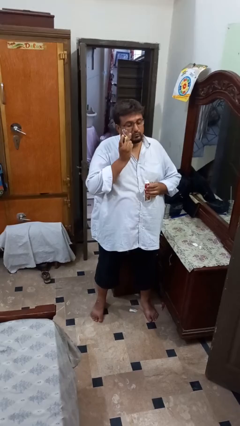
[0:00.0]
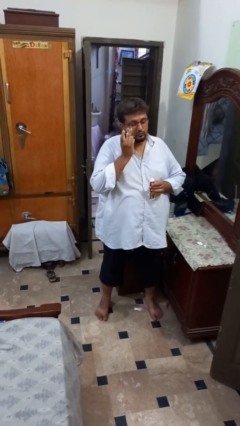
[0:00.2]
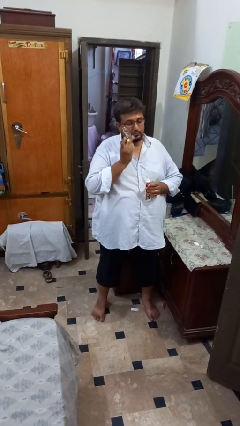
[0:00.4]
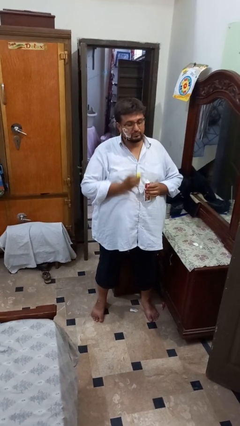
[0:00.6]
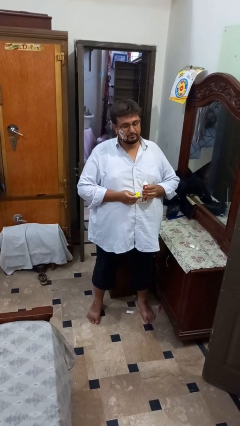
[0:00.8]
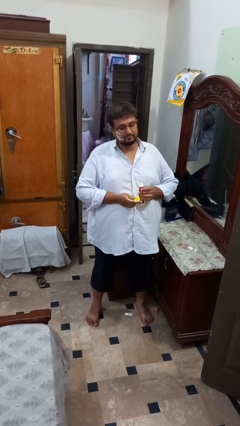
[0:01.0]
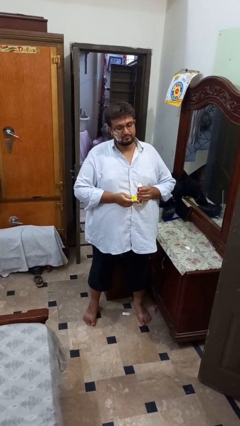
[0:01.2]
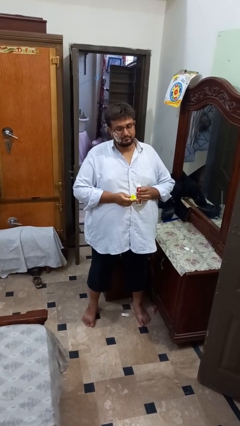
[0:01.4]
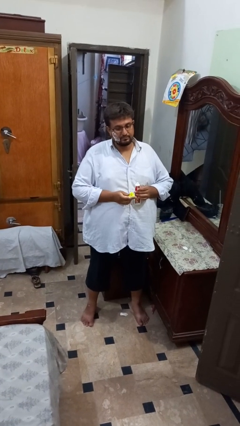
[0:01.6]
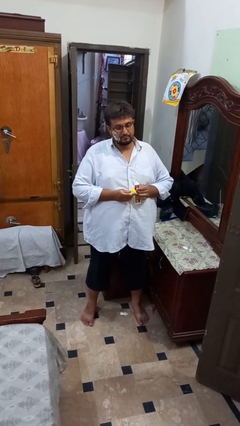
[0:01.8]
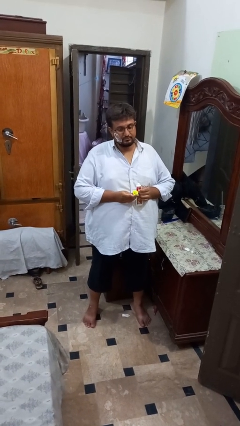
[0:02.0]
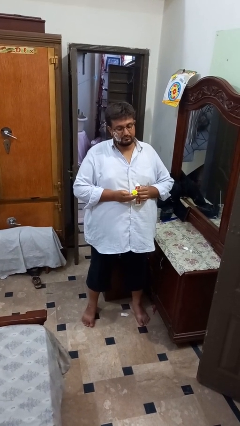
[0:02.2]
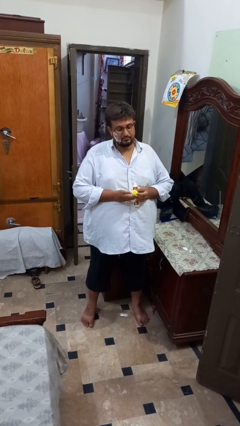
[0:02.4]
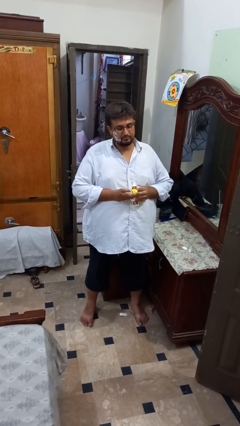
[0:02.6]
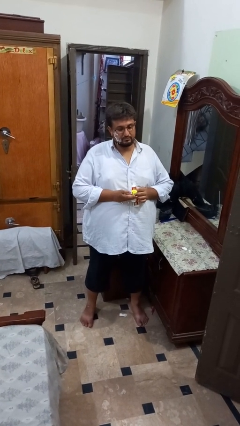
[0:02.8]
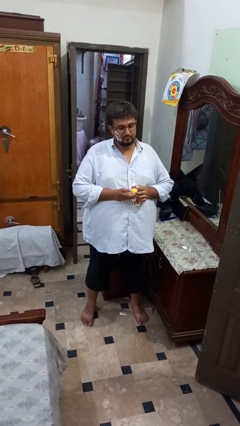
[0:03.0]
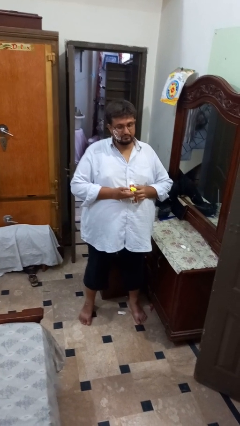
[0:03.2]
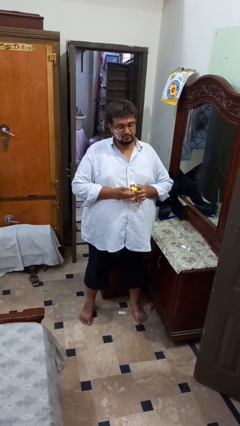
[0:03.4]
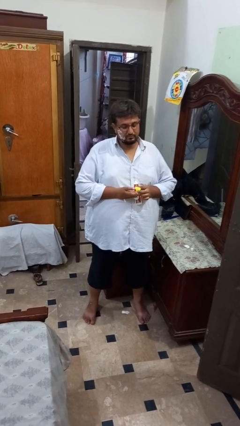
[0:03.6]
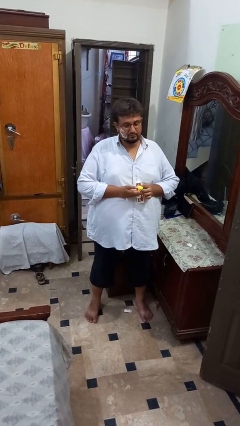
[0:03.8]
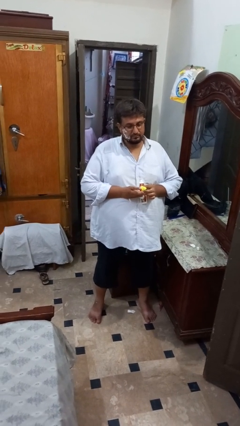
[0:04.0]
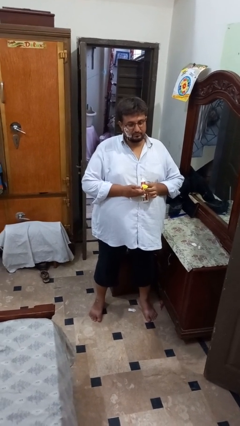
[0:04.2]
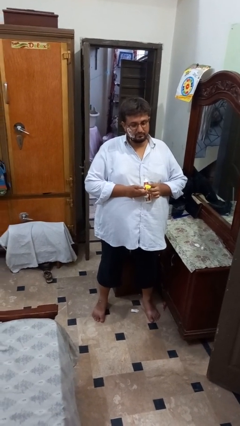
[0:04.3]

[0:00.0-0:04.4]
person applies shaving cream

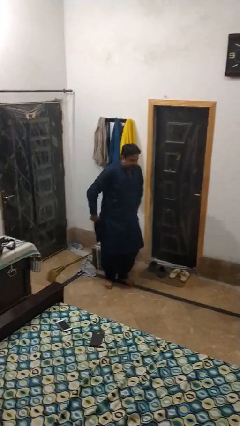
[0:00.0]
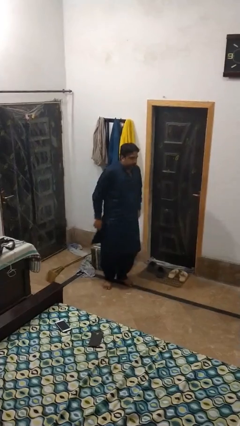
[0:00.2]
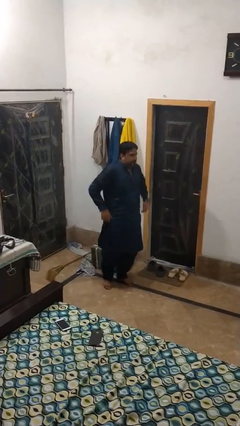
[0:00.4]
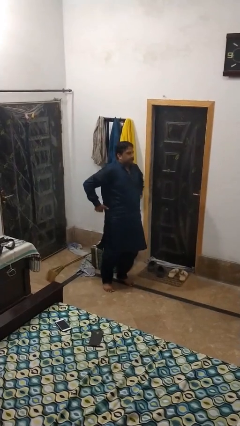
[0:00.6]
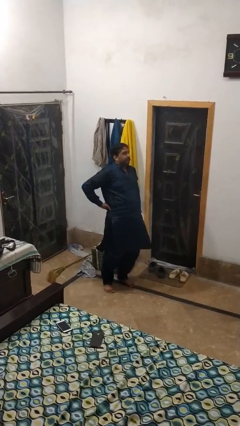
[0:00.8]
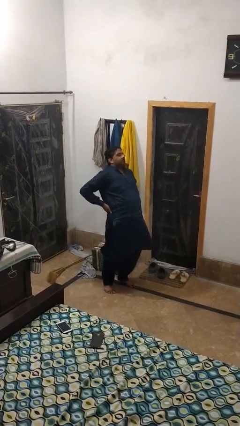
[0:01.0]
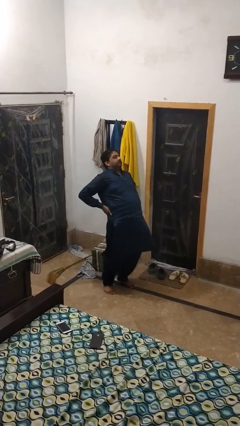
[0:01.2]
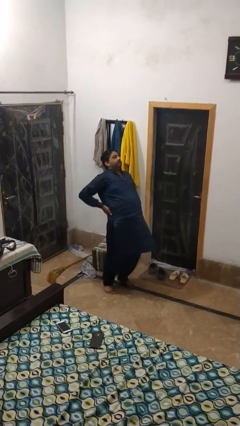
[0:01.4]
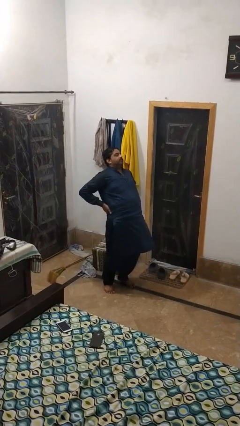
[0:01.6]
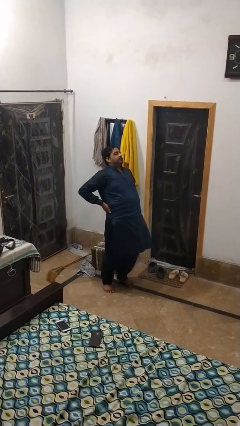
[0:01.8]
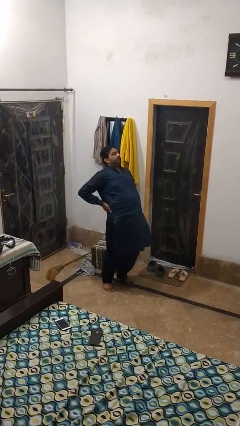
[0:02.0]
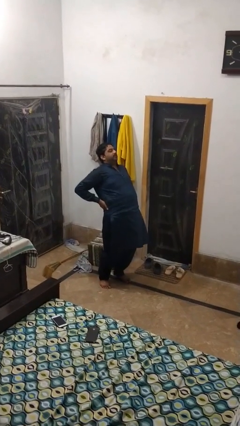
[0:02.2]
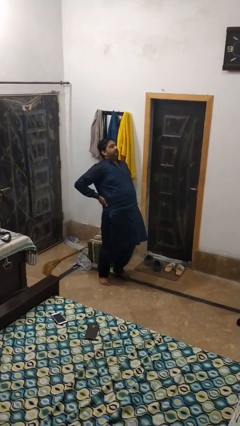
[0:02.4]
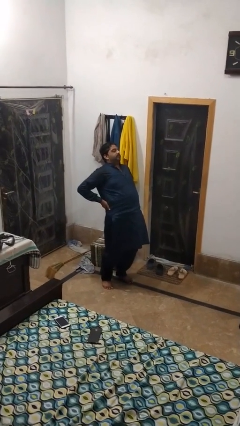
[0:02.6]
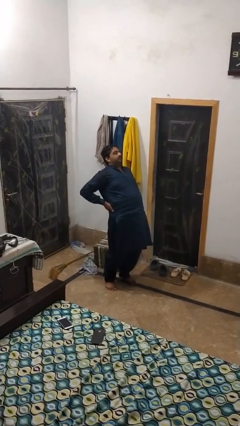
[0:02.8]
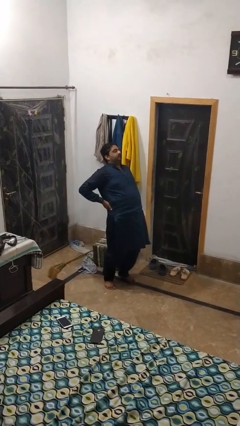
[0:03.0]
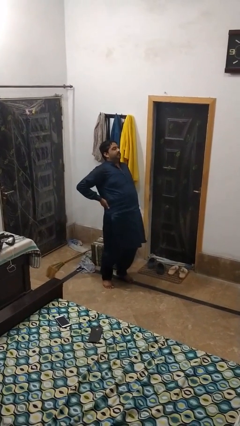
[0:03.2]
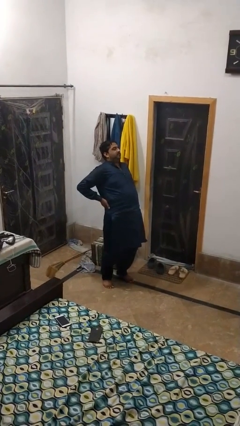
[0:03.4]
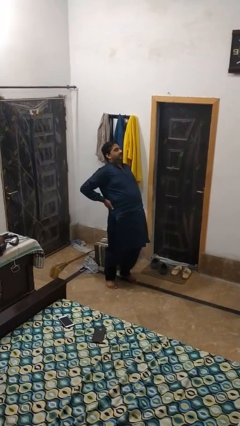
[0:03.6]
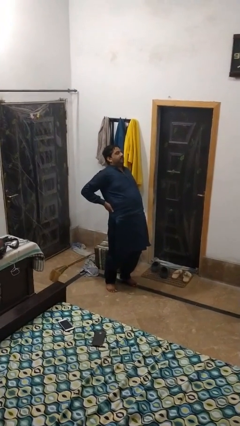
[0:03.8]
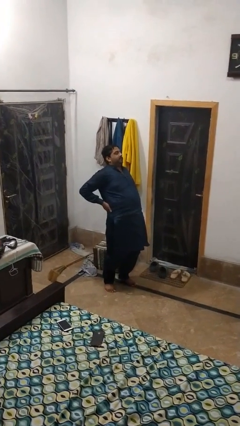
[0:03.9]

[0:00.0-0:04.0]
person stretches back

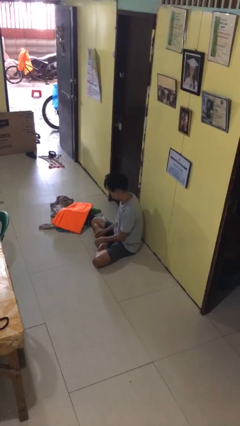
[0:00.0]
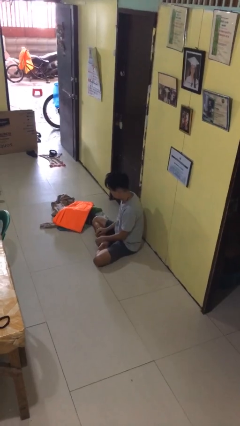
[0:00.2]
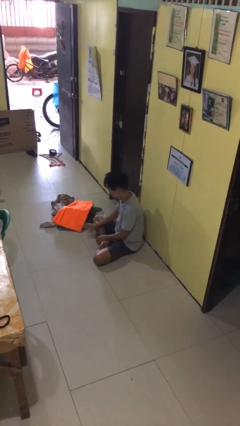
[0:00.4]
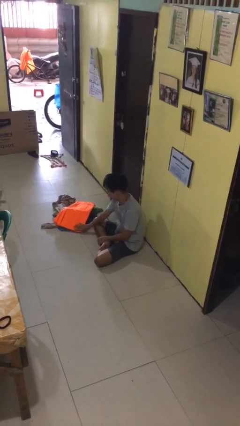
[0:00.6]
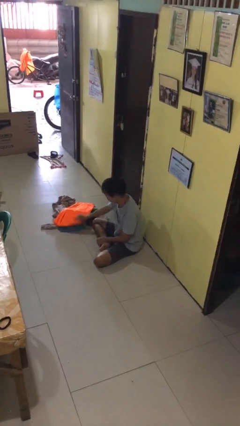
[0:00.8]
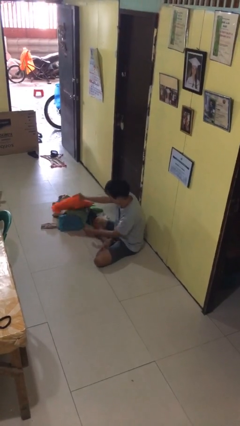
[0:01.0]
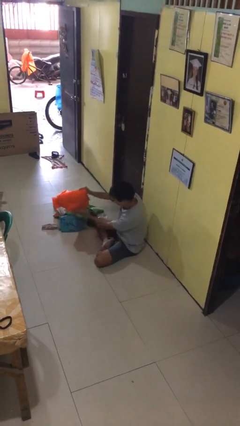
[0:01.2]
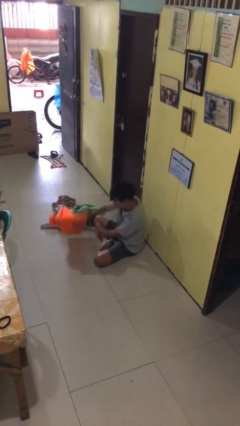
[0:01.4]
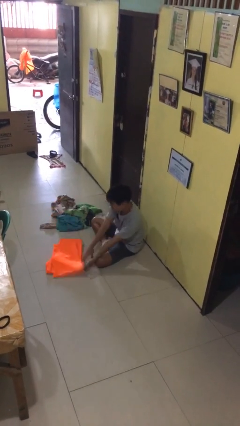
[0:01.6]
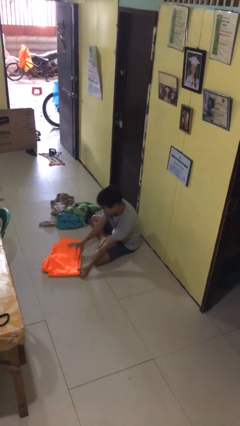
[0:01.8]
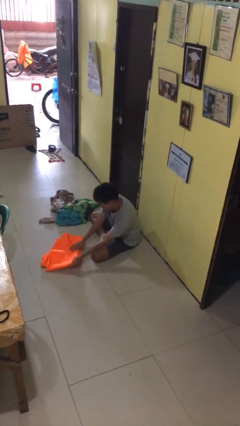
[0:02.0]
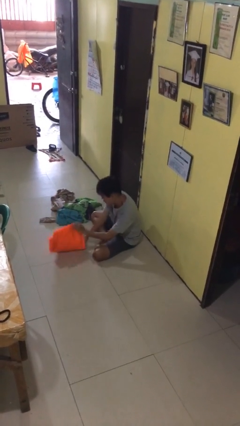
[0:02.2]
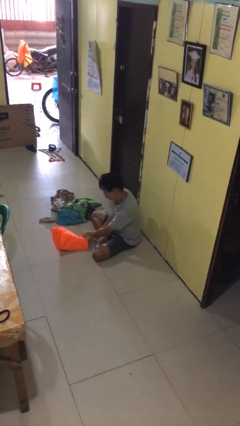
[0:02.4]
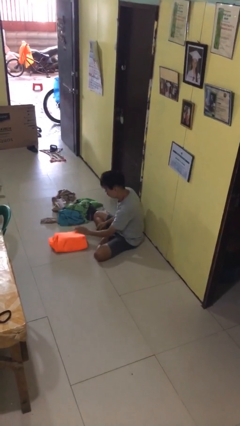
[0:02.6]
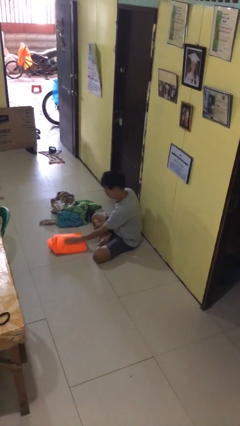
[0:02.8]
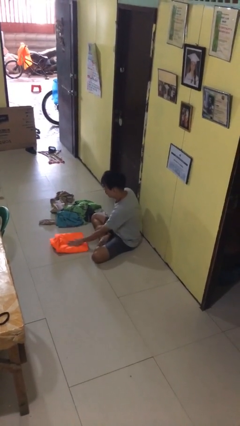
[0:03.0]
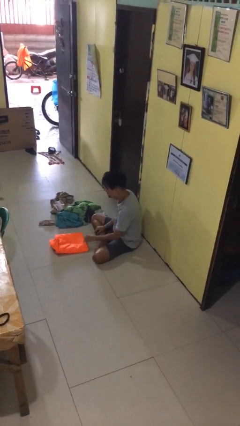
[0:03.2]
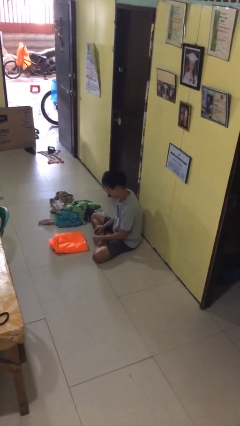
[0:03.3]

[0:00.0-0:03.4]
person folds pants

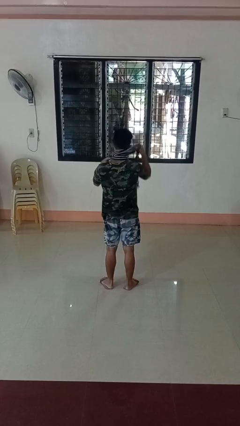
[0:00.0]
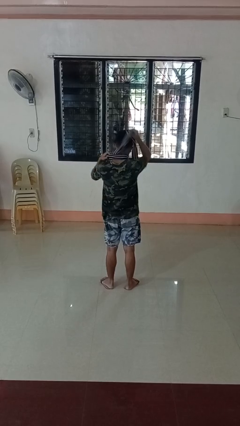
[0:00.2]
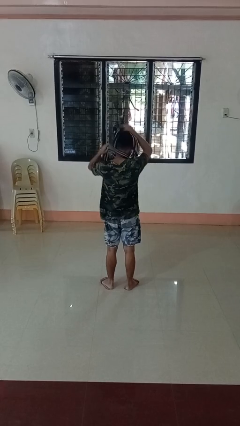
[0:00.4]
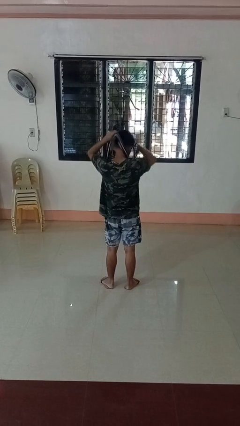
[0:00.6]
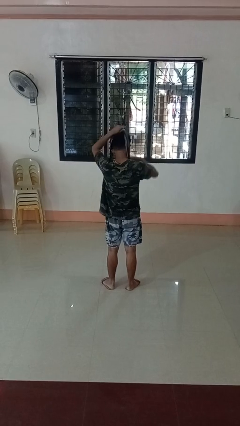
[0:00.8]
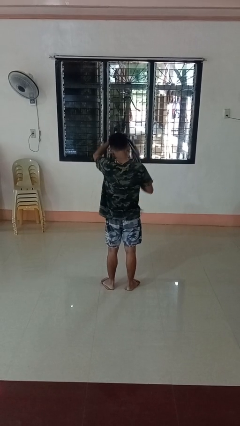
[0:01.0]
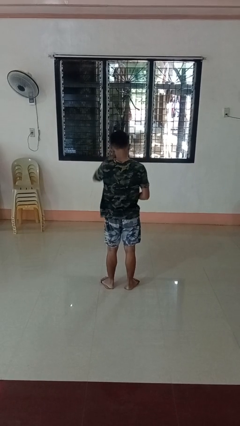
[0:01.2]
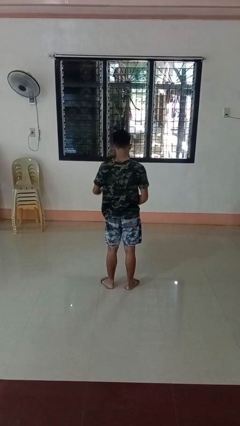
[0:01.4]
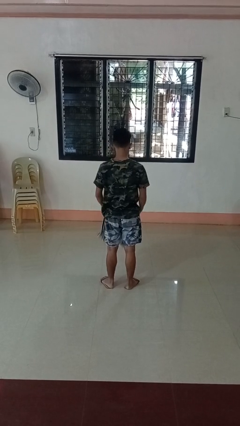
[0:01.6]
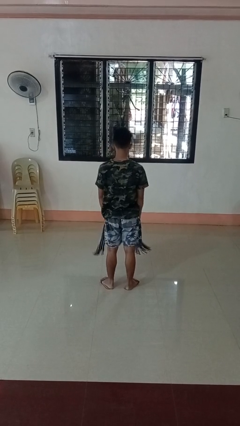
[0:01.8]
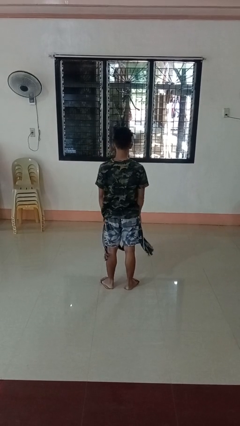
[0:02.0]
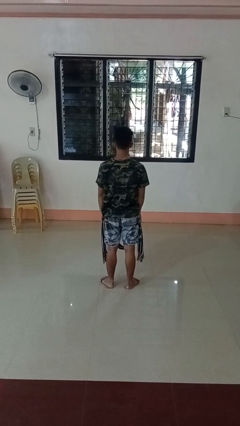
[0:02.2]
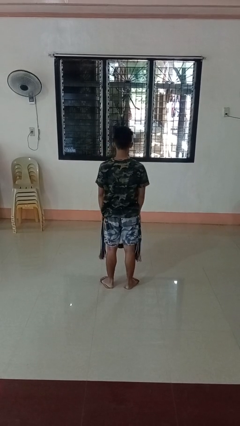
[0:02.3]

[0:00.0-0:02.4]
person takes off scarf

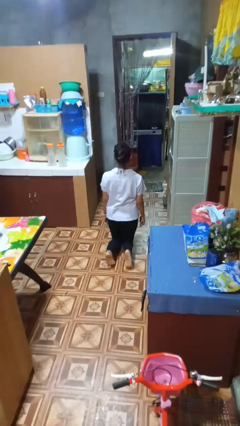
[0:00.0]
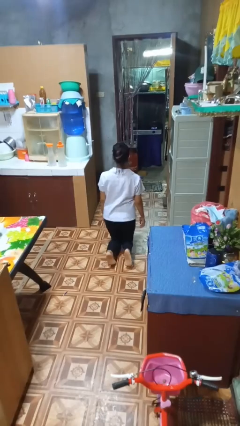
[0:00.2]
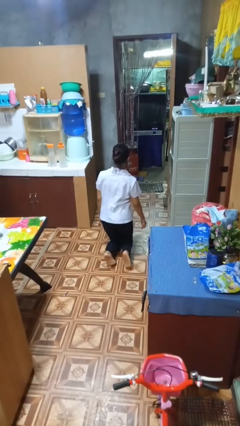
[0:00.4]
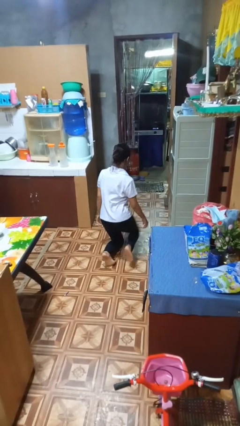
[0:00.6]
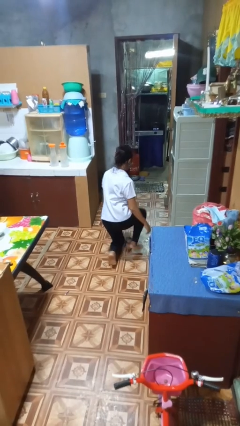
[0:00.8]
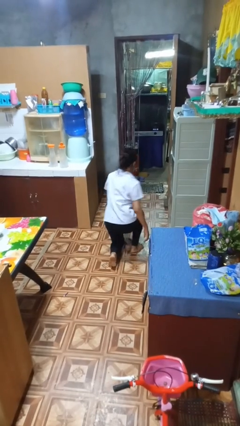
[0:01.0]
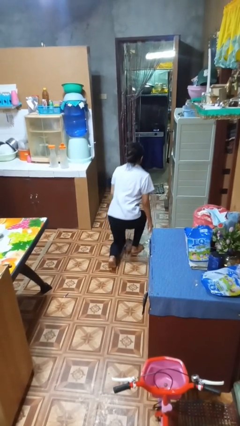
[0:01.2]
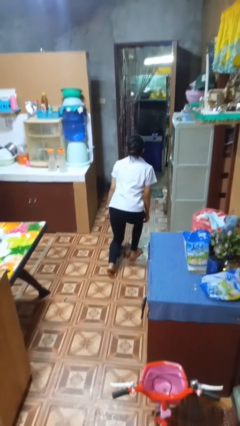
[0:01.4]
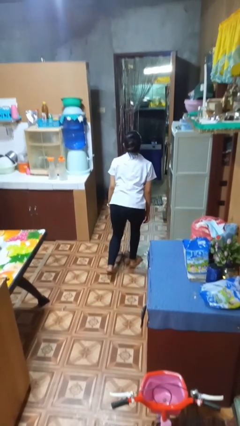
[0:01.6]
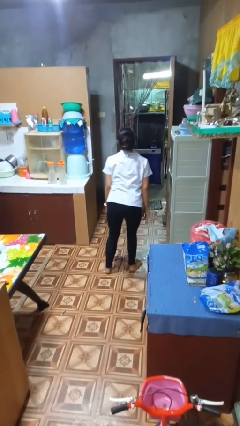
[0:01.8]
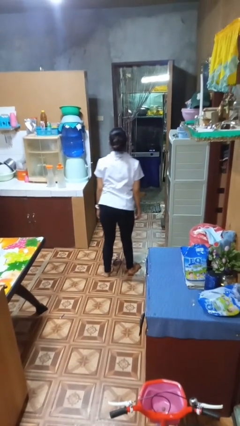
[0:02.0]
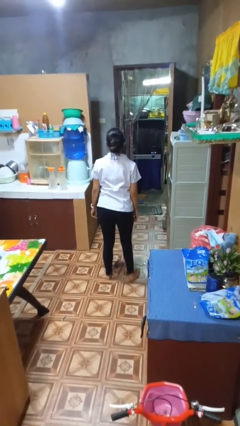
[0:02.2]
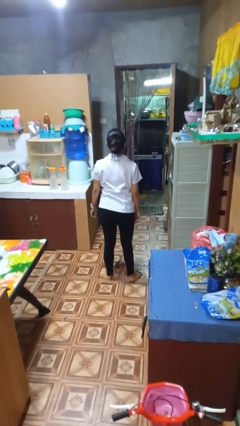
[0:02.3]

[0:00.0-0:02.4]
person stands up from floor

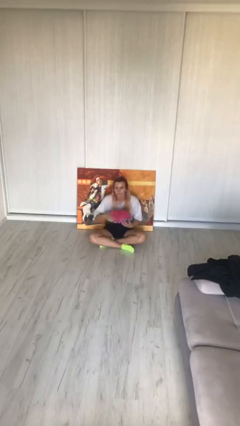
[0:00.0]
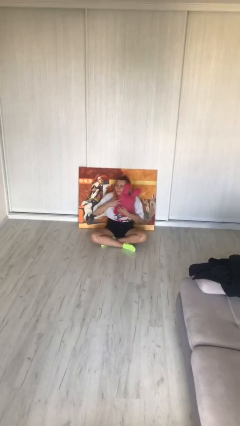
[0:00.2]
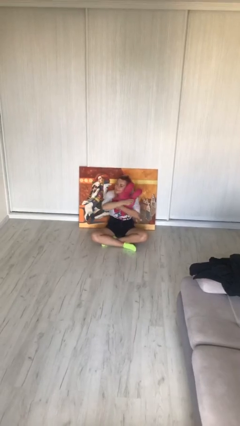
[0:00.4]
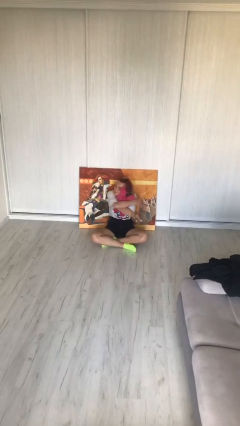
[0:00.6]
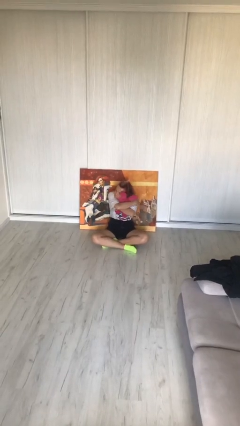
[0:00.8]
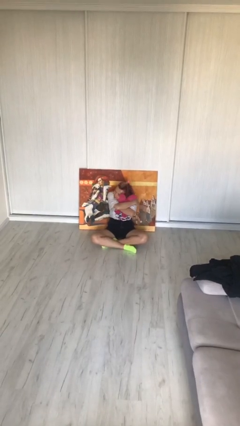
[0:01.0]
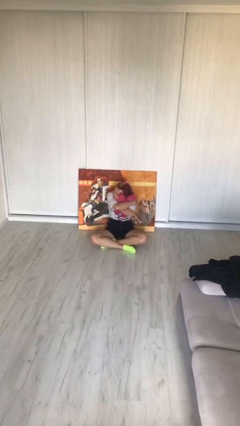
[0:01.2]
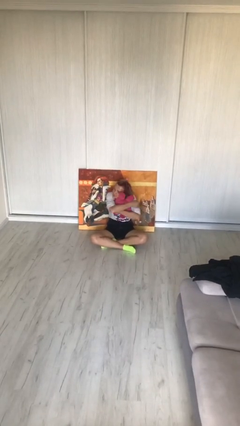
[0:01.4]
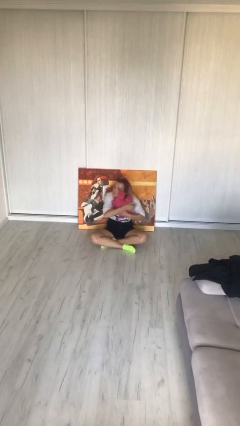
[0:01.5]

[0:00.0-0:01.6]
person hugs stuffed animal
